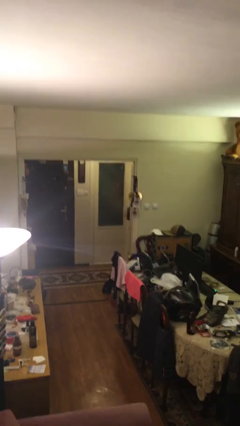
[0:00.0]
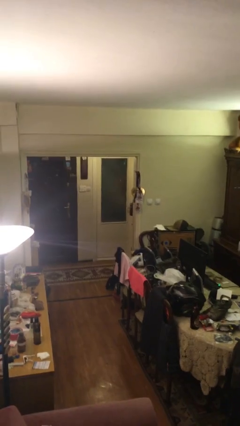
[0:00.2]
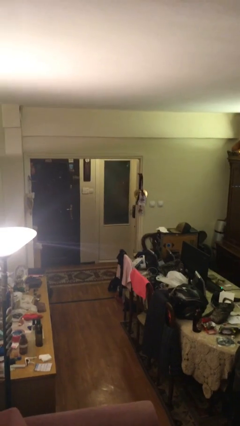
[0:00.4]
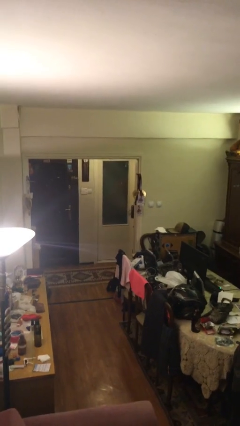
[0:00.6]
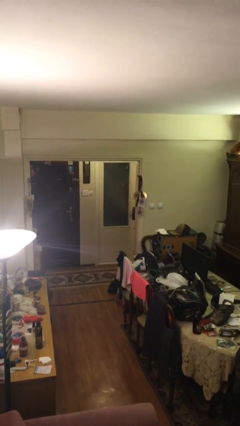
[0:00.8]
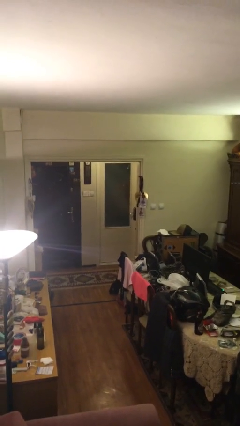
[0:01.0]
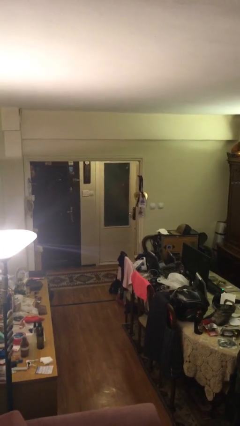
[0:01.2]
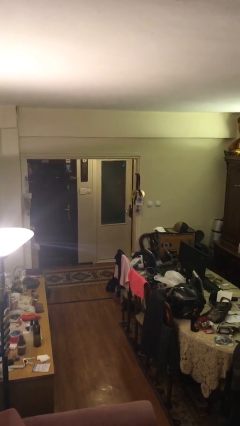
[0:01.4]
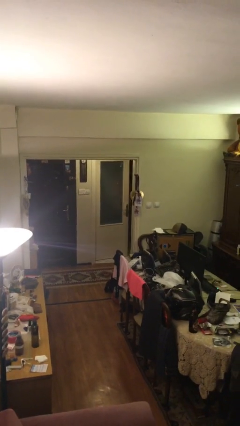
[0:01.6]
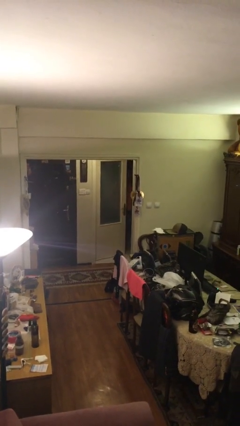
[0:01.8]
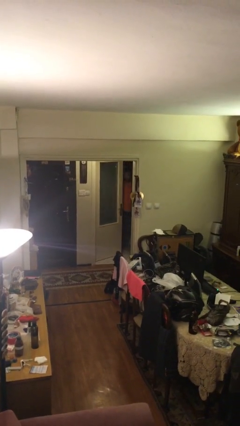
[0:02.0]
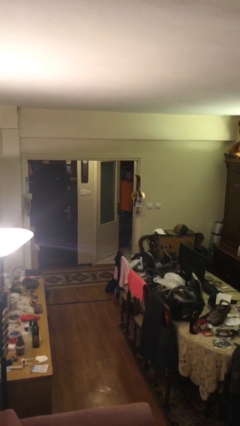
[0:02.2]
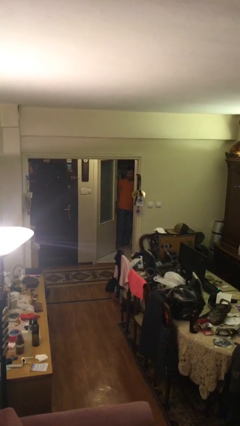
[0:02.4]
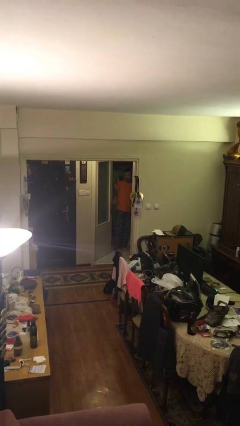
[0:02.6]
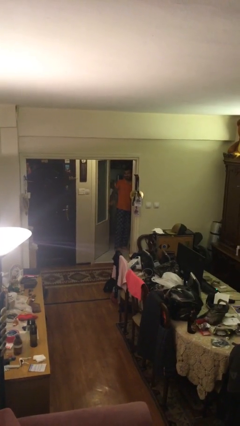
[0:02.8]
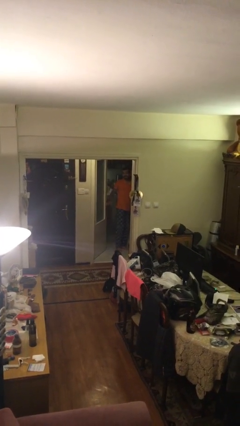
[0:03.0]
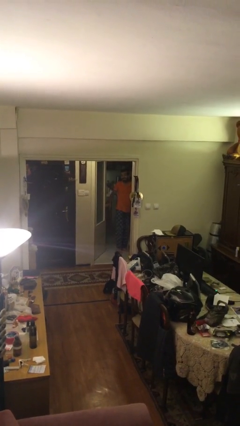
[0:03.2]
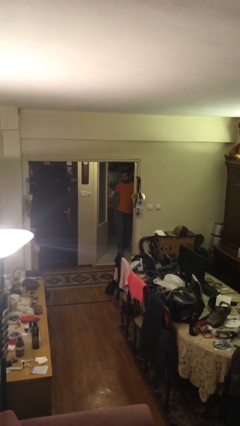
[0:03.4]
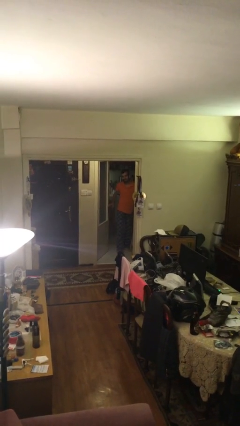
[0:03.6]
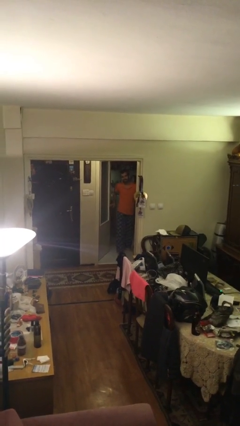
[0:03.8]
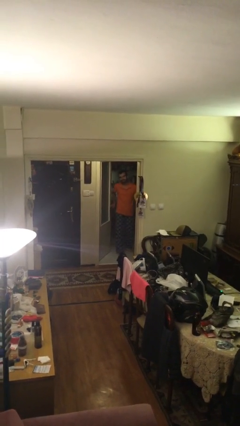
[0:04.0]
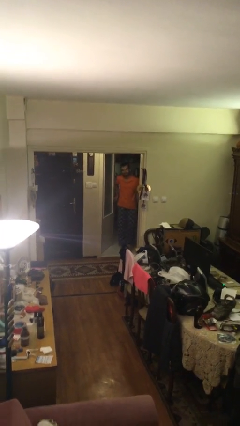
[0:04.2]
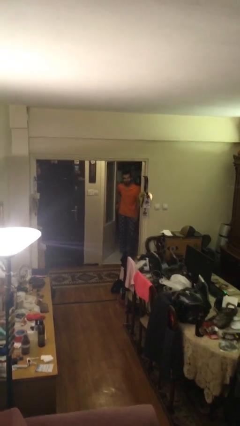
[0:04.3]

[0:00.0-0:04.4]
person opens facility door

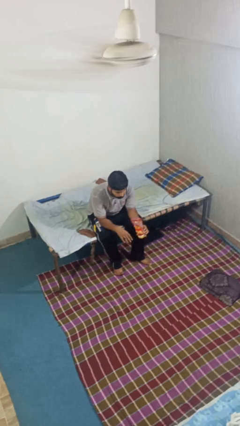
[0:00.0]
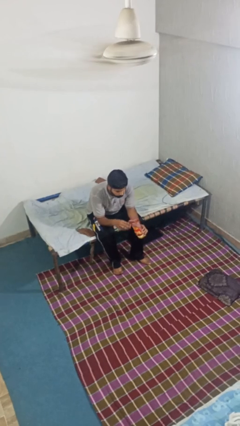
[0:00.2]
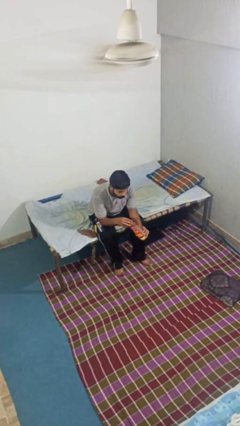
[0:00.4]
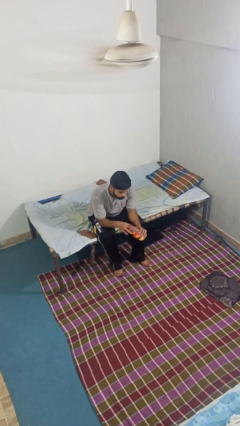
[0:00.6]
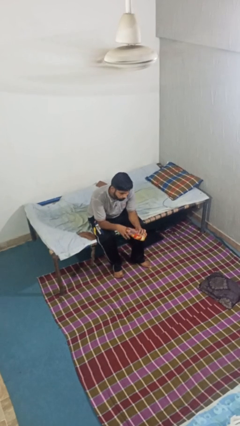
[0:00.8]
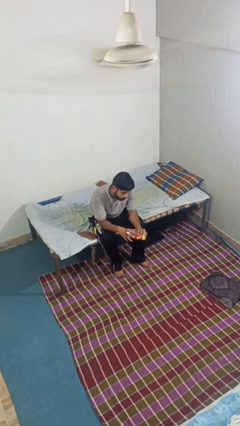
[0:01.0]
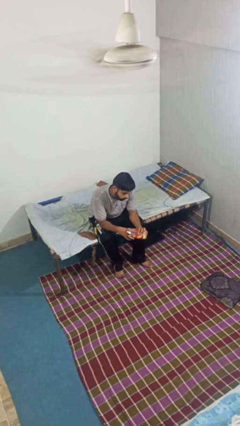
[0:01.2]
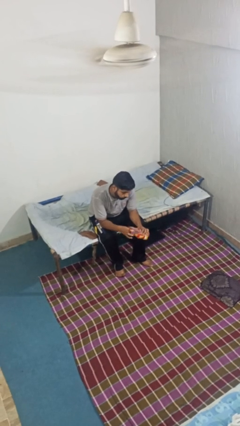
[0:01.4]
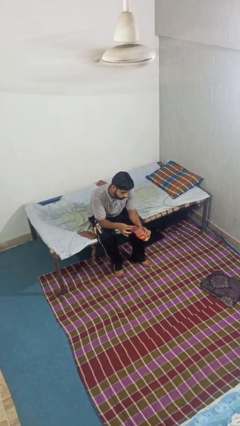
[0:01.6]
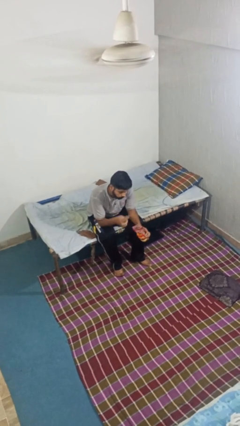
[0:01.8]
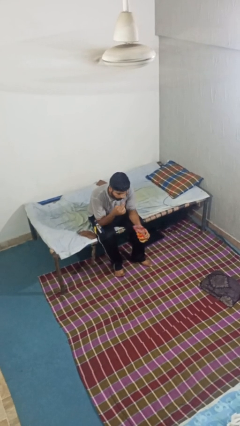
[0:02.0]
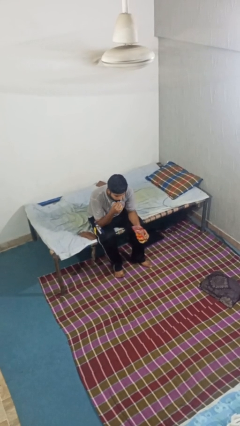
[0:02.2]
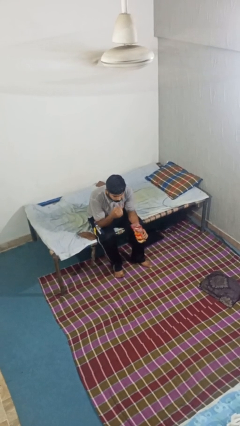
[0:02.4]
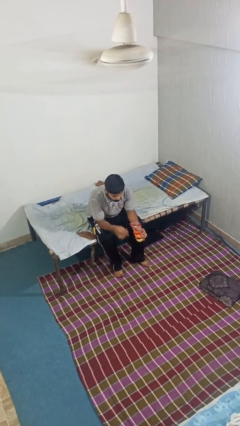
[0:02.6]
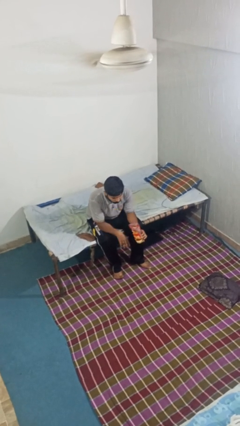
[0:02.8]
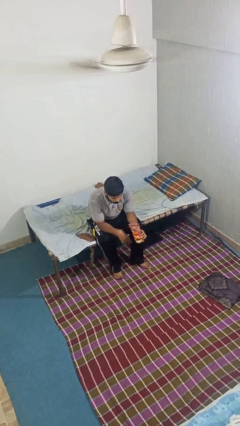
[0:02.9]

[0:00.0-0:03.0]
person eats snack from bag

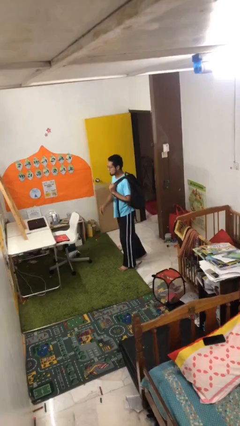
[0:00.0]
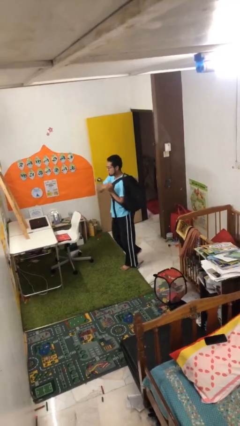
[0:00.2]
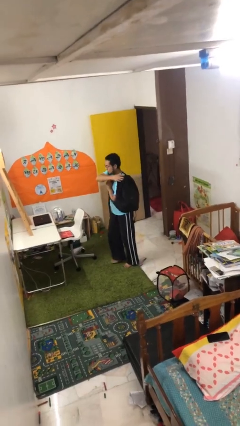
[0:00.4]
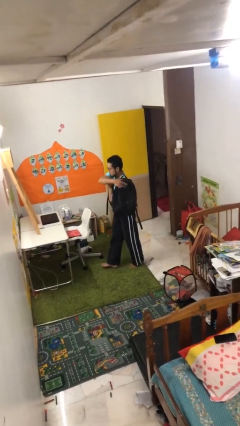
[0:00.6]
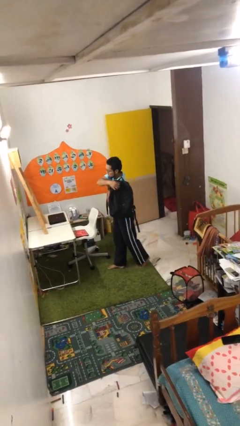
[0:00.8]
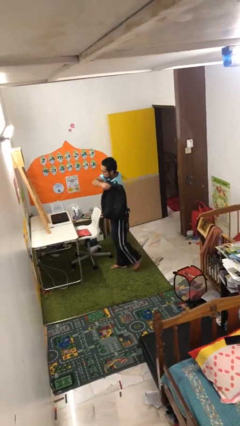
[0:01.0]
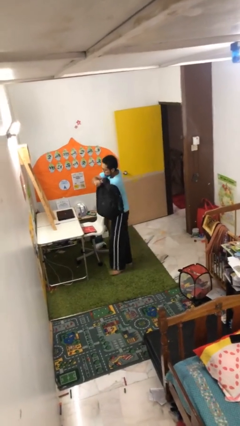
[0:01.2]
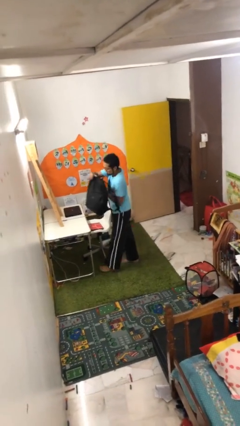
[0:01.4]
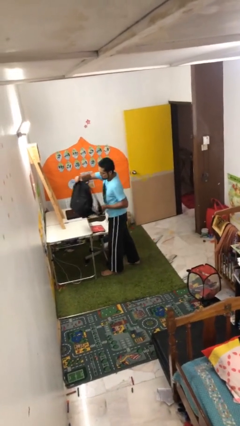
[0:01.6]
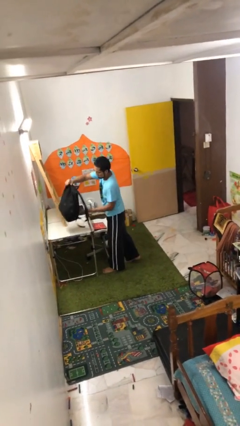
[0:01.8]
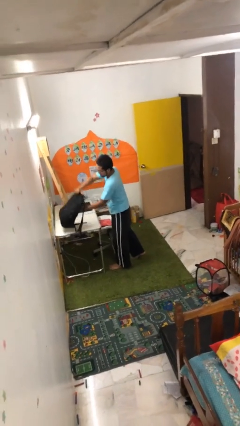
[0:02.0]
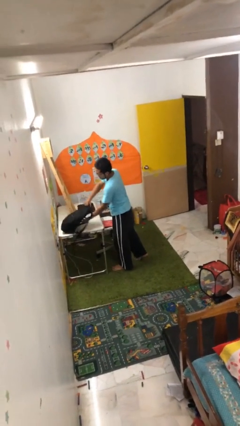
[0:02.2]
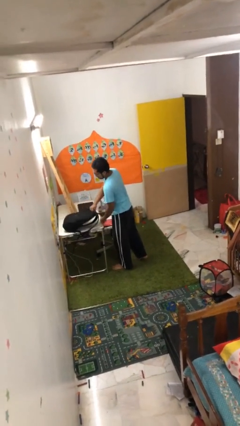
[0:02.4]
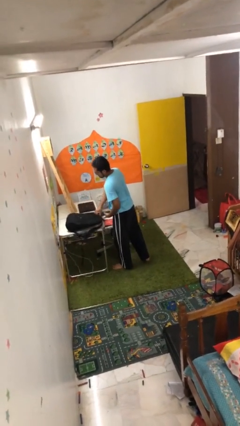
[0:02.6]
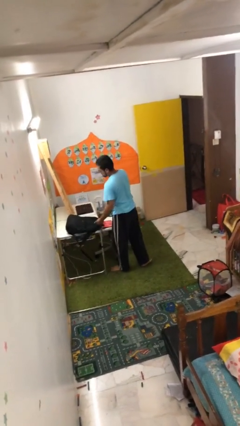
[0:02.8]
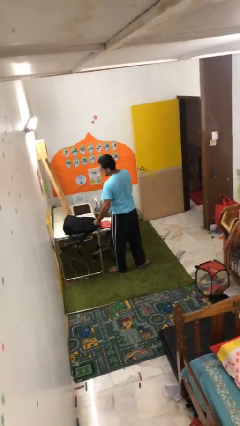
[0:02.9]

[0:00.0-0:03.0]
person puts down object on table

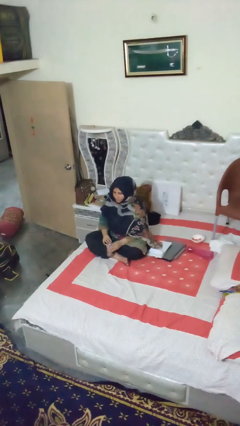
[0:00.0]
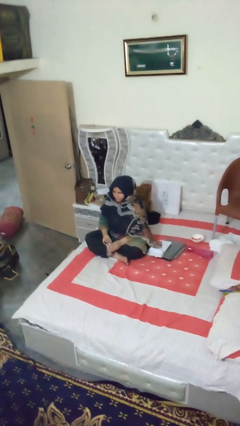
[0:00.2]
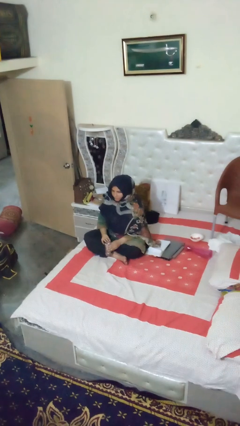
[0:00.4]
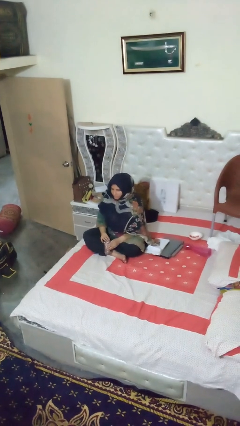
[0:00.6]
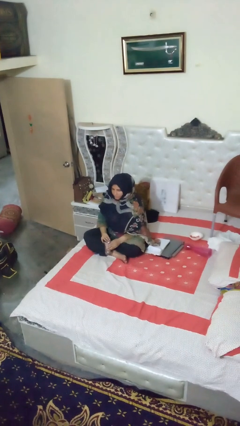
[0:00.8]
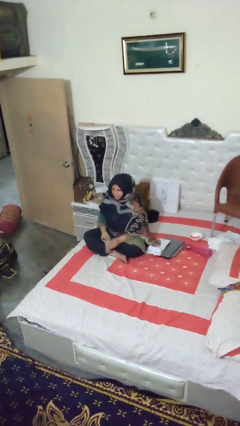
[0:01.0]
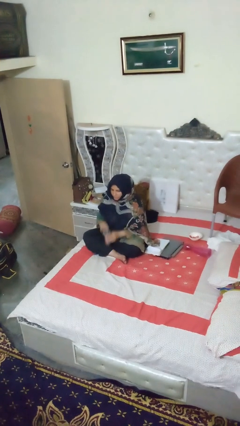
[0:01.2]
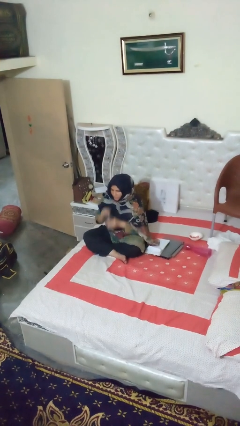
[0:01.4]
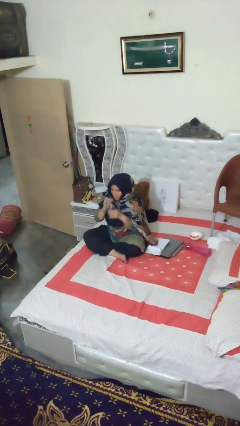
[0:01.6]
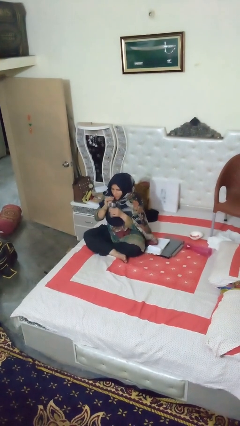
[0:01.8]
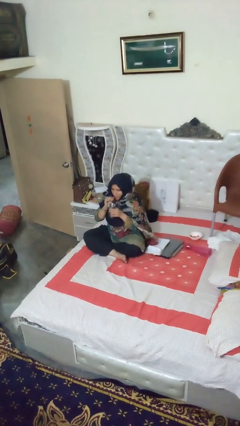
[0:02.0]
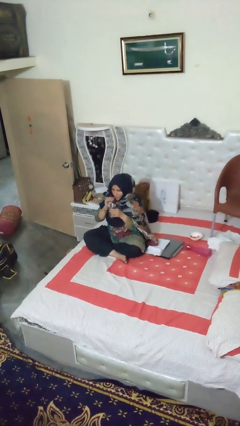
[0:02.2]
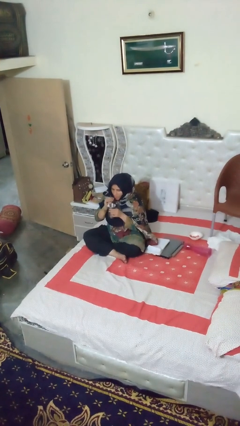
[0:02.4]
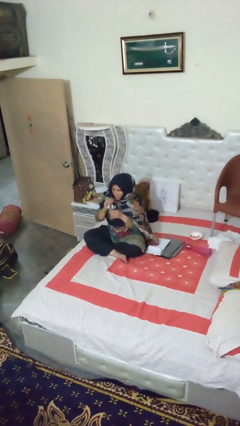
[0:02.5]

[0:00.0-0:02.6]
person drinks from straw

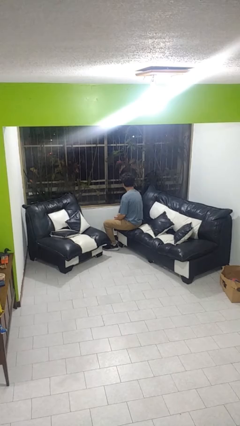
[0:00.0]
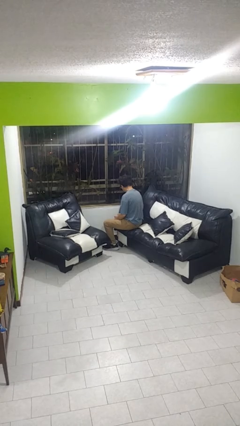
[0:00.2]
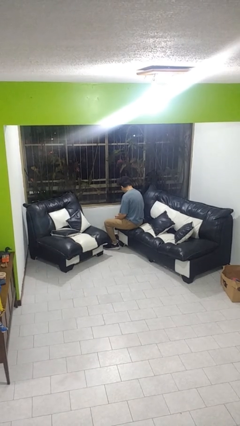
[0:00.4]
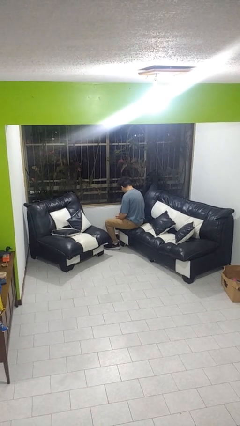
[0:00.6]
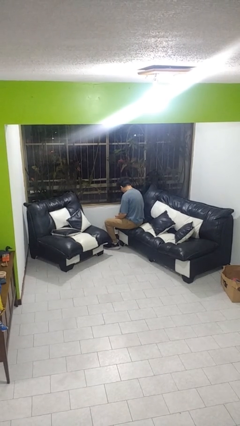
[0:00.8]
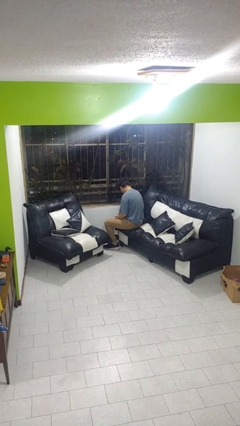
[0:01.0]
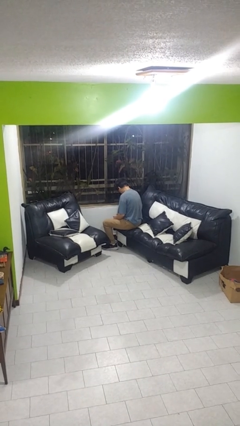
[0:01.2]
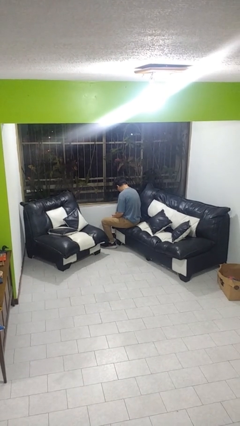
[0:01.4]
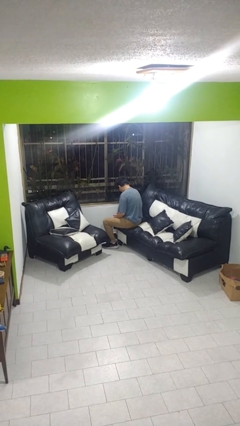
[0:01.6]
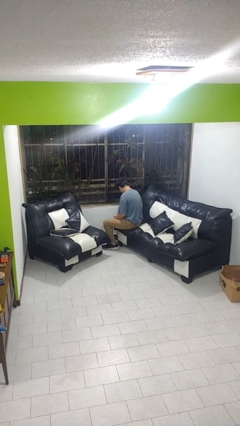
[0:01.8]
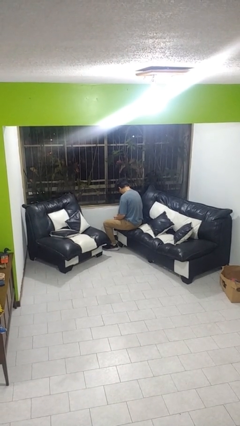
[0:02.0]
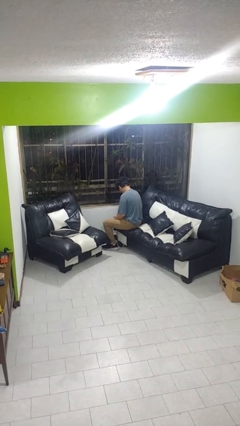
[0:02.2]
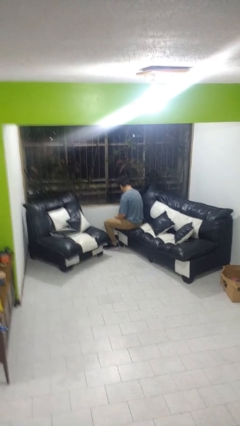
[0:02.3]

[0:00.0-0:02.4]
person looks at hands in lap

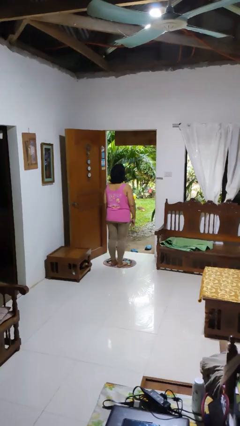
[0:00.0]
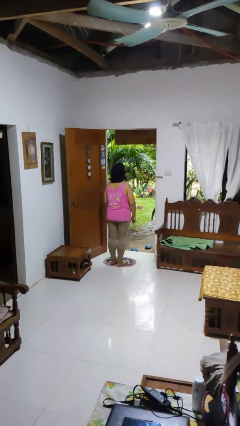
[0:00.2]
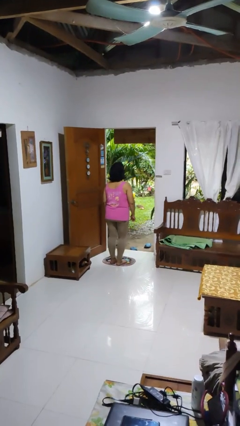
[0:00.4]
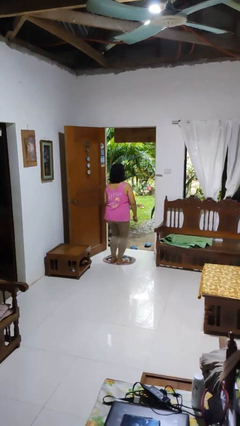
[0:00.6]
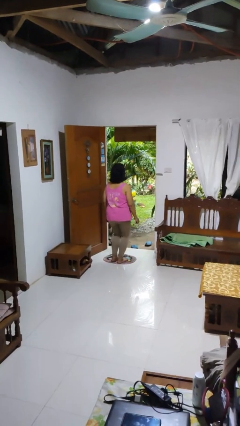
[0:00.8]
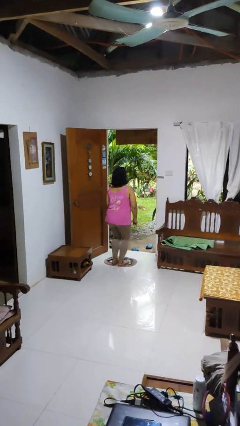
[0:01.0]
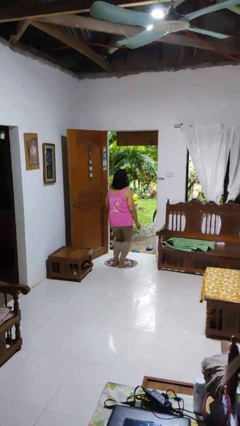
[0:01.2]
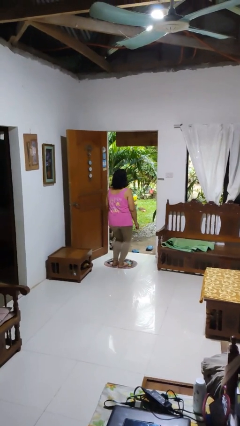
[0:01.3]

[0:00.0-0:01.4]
person wiggles hips

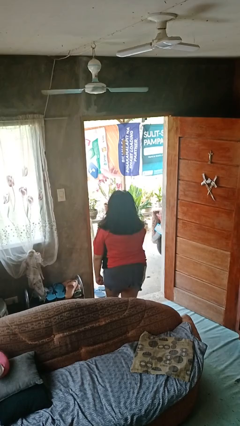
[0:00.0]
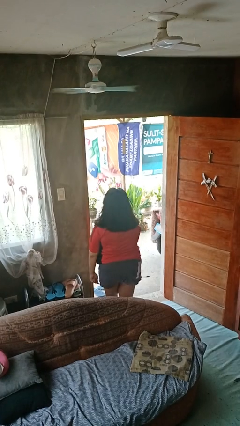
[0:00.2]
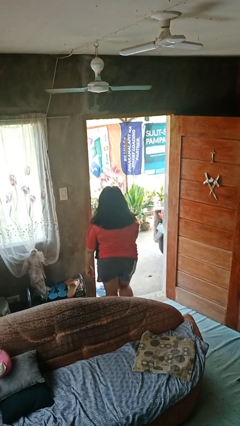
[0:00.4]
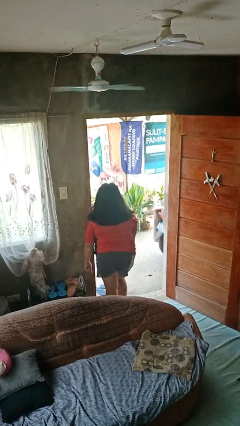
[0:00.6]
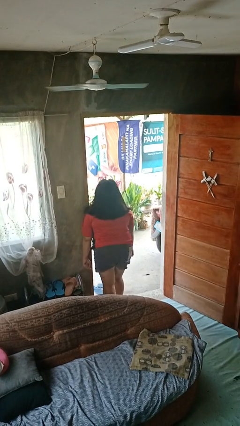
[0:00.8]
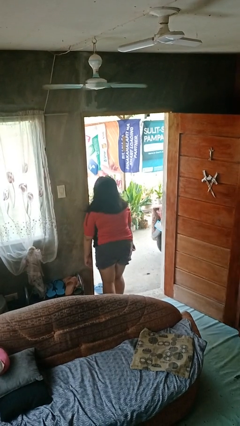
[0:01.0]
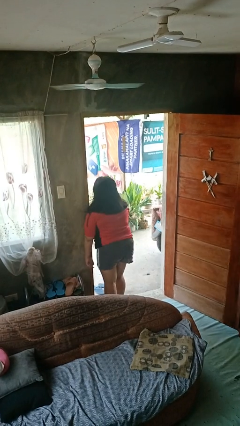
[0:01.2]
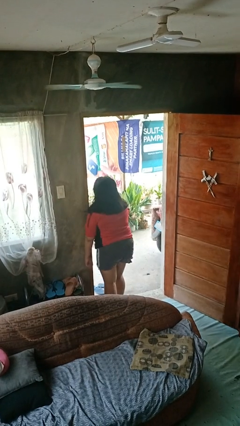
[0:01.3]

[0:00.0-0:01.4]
person bumps into wall
